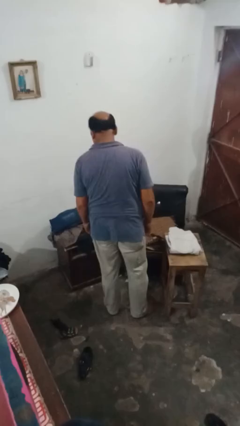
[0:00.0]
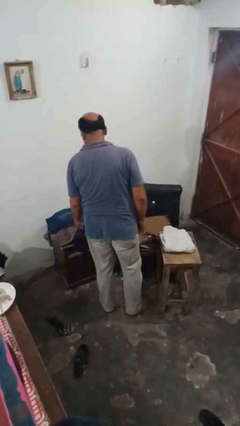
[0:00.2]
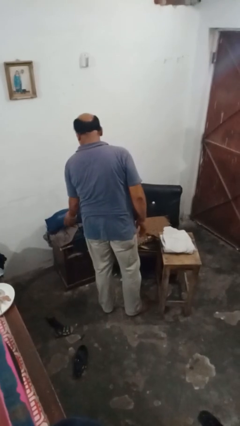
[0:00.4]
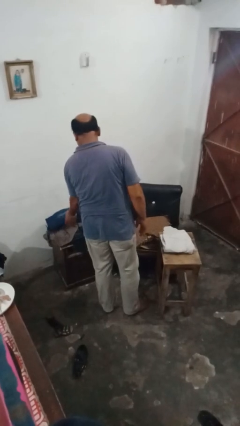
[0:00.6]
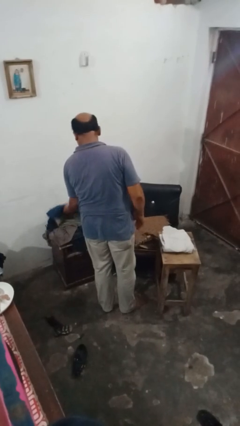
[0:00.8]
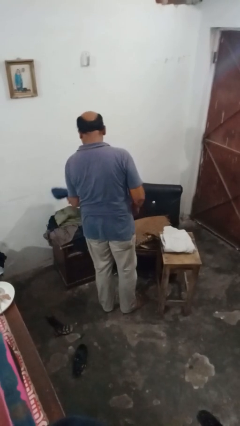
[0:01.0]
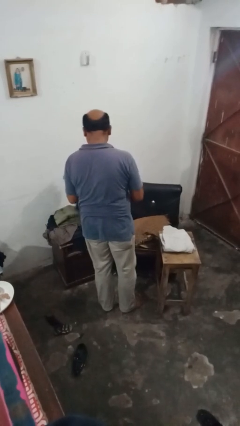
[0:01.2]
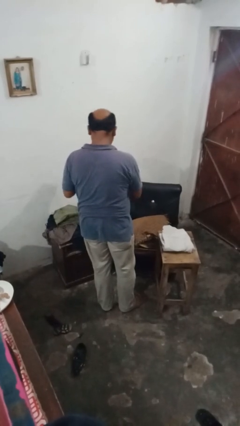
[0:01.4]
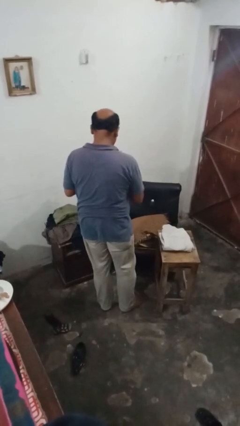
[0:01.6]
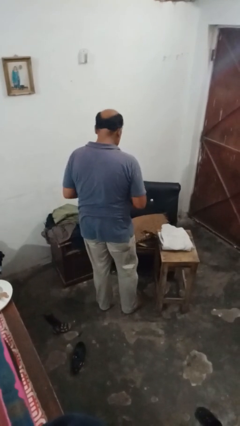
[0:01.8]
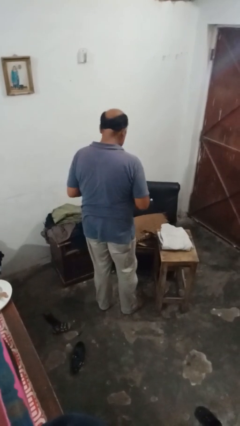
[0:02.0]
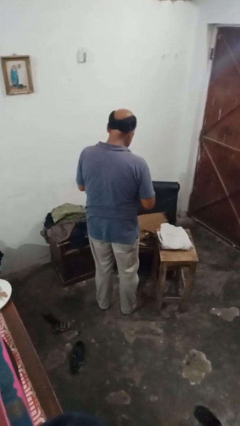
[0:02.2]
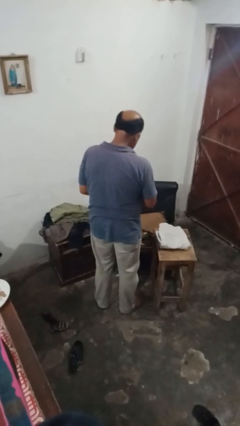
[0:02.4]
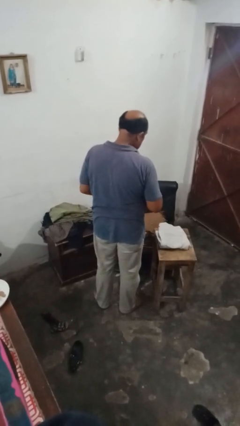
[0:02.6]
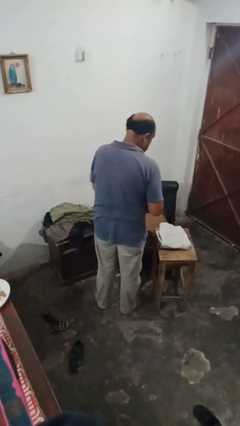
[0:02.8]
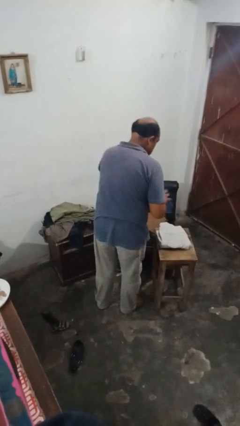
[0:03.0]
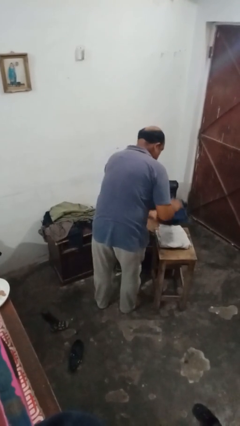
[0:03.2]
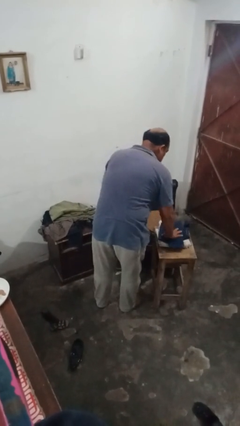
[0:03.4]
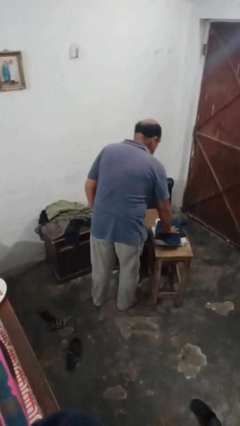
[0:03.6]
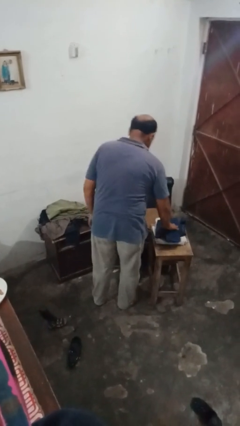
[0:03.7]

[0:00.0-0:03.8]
person folds pants

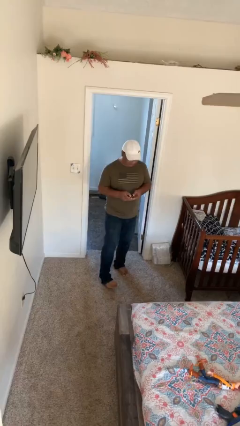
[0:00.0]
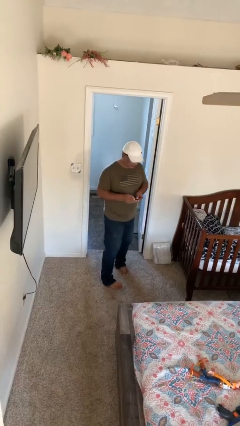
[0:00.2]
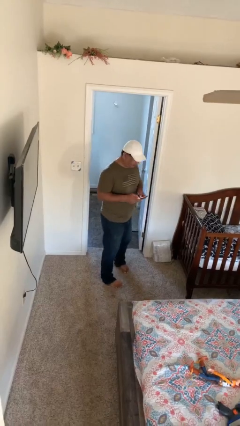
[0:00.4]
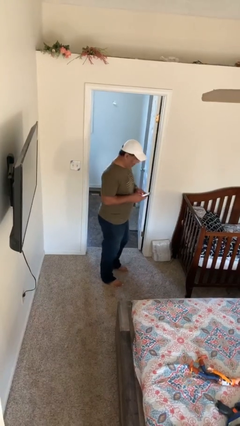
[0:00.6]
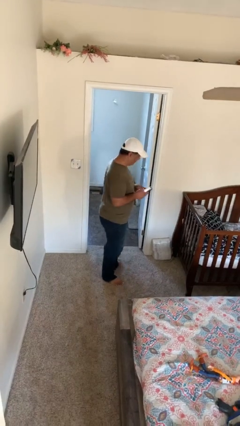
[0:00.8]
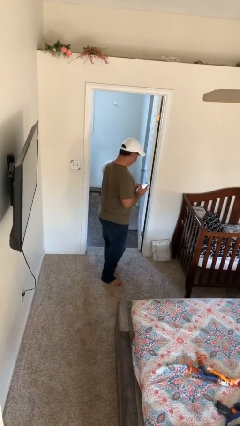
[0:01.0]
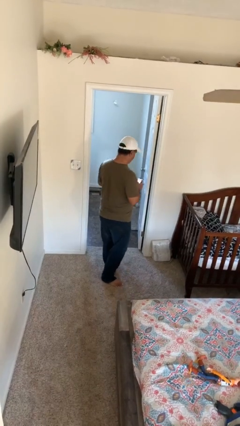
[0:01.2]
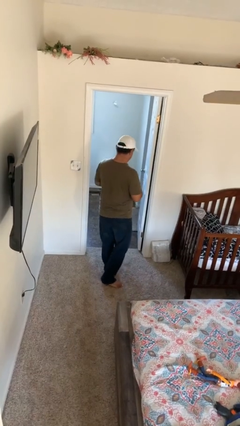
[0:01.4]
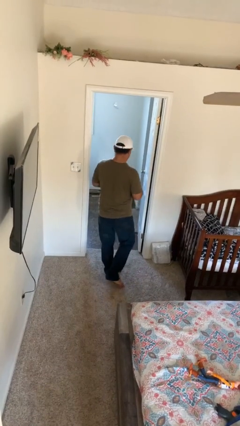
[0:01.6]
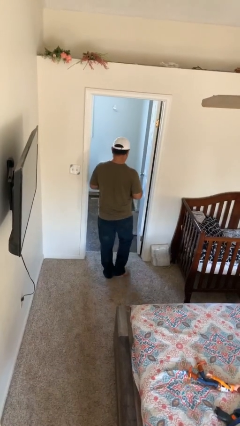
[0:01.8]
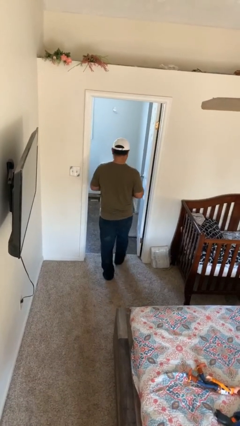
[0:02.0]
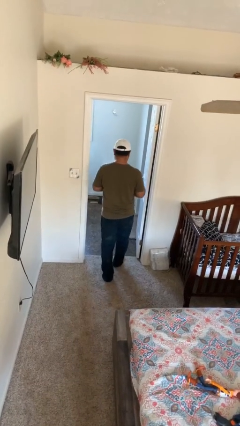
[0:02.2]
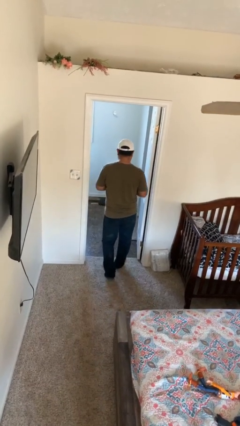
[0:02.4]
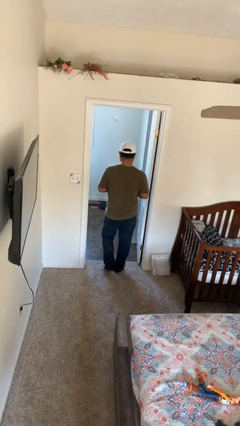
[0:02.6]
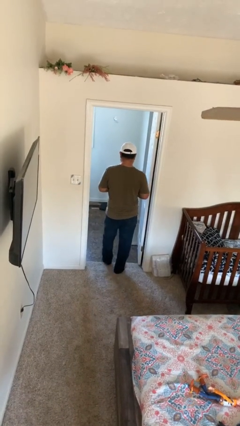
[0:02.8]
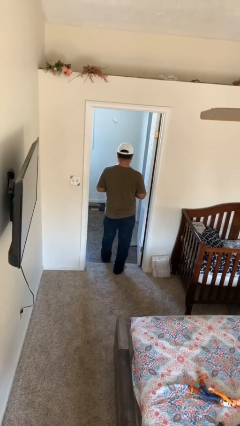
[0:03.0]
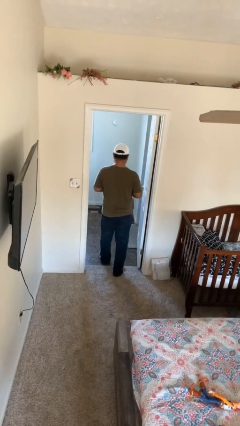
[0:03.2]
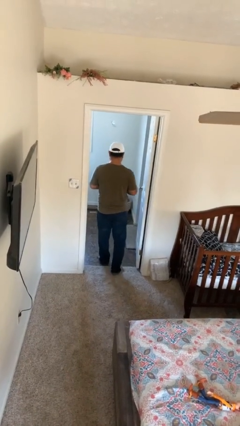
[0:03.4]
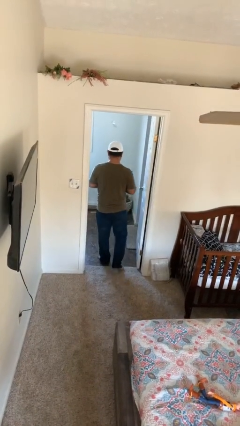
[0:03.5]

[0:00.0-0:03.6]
person exits scene through structure

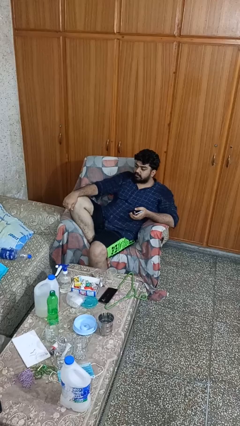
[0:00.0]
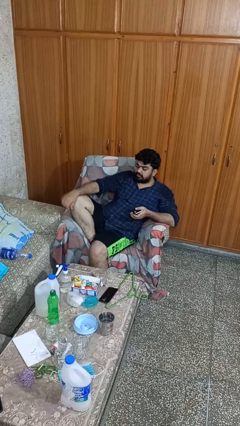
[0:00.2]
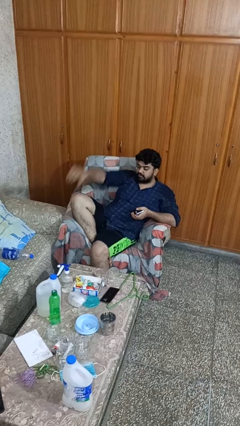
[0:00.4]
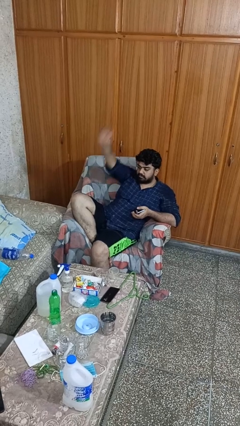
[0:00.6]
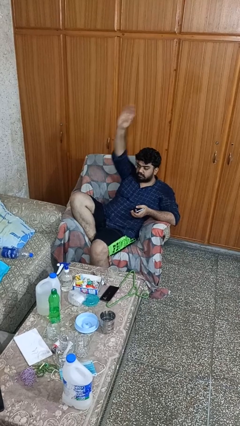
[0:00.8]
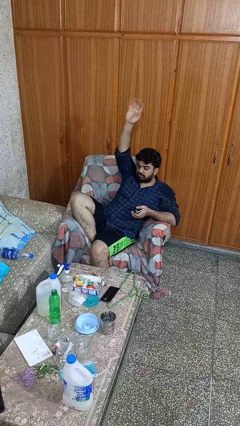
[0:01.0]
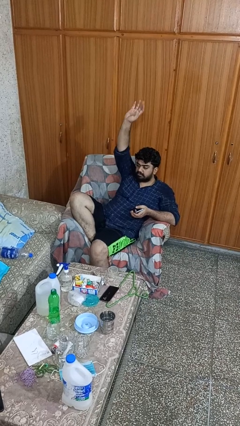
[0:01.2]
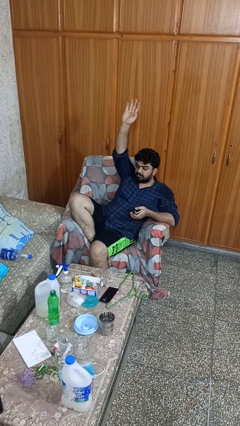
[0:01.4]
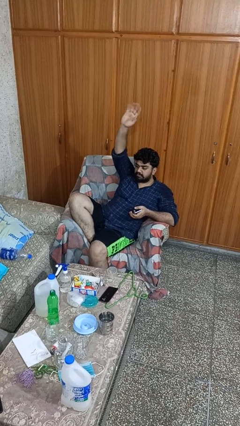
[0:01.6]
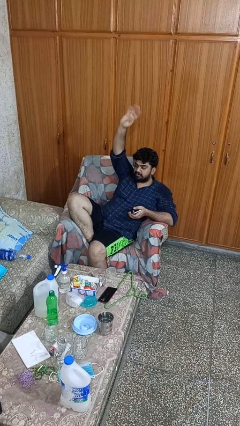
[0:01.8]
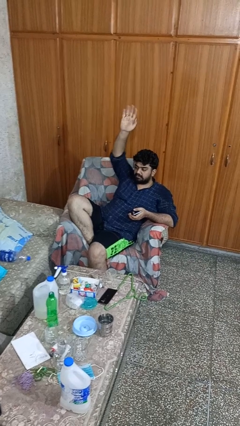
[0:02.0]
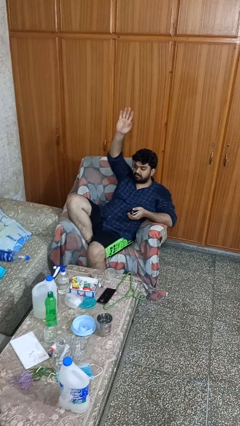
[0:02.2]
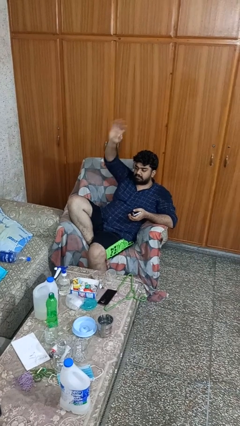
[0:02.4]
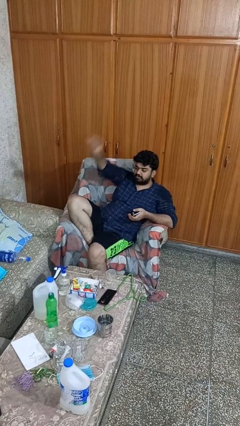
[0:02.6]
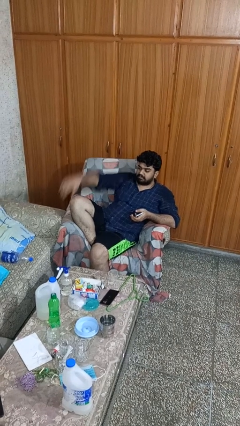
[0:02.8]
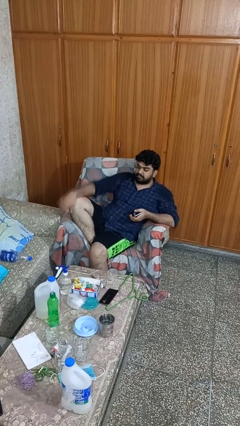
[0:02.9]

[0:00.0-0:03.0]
person waves at person

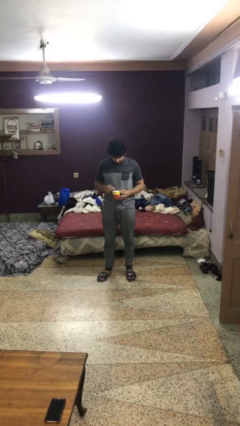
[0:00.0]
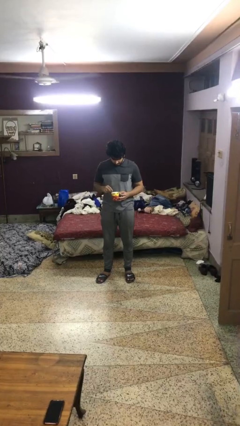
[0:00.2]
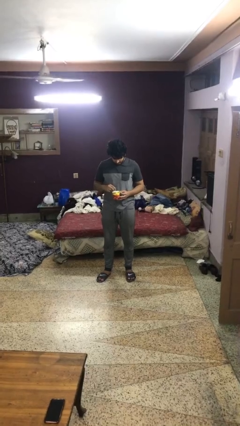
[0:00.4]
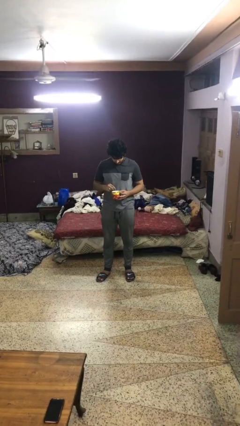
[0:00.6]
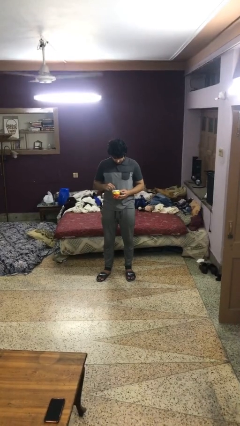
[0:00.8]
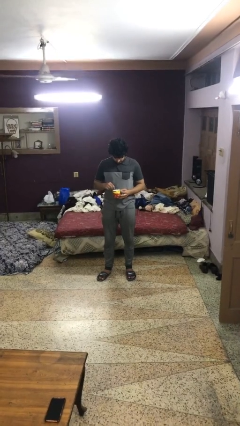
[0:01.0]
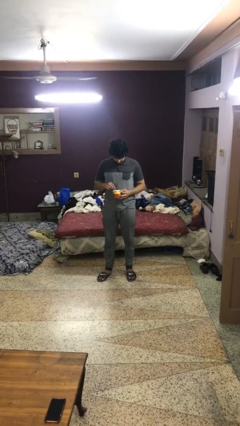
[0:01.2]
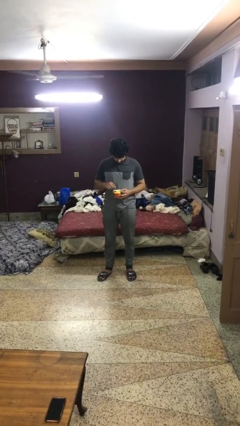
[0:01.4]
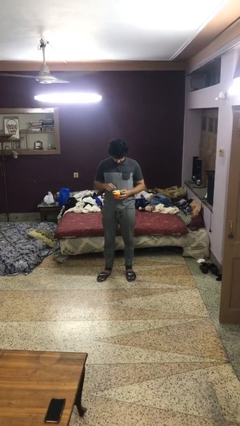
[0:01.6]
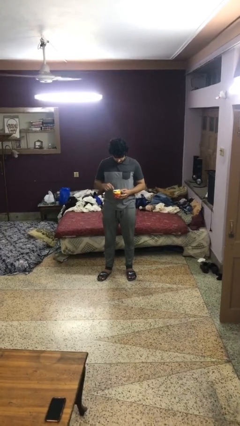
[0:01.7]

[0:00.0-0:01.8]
person stirs mug

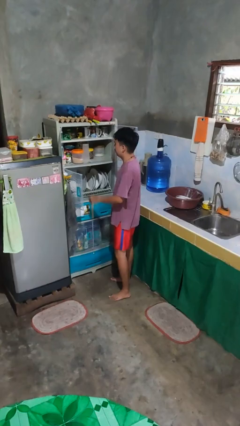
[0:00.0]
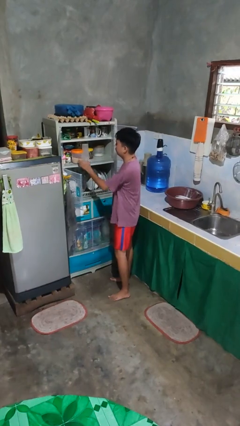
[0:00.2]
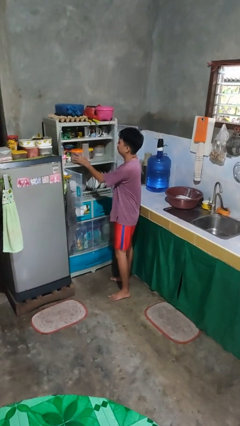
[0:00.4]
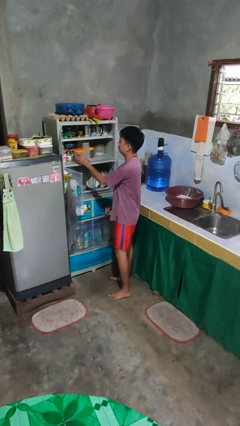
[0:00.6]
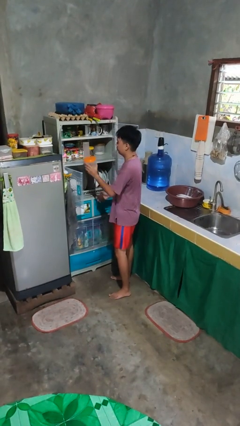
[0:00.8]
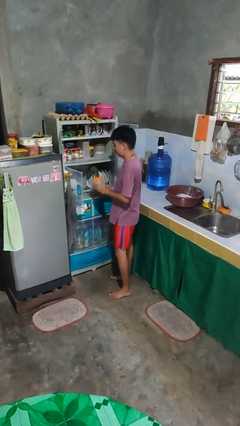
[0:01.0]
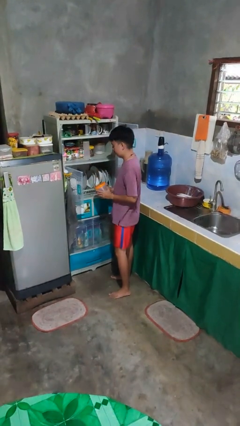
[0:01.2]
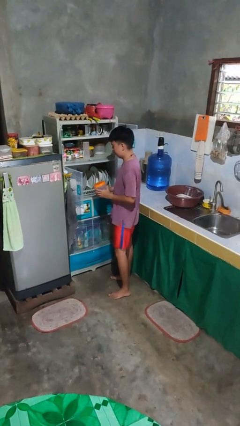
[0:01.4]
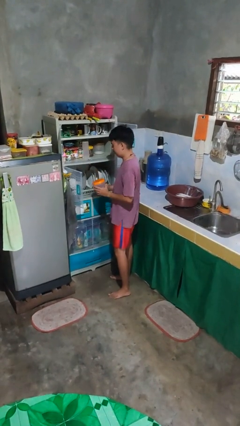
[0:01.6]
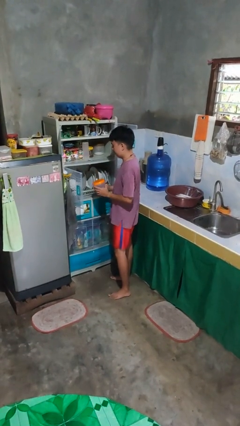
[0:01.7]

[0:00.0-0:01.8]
person takes object from cabinet

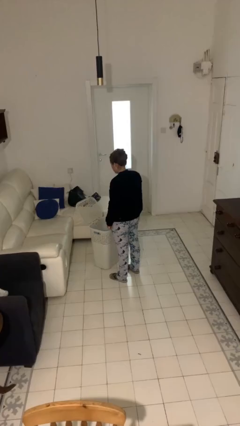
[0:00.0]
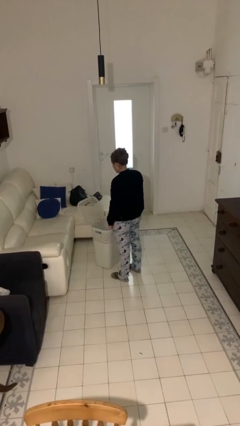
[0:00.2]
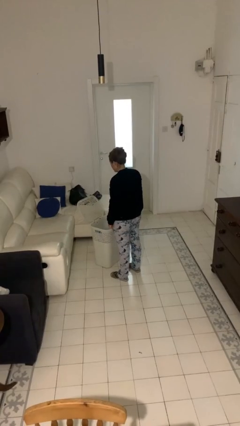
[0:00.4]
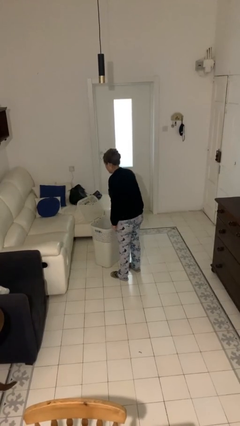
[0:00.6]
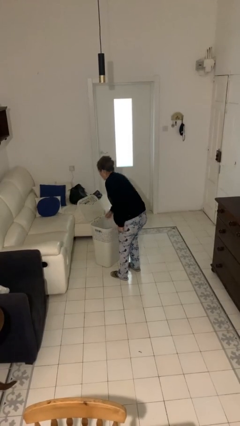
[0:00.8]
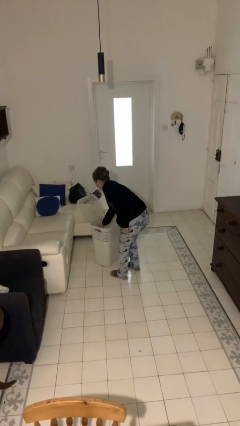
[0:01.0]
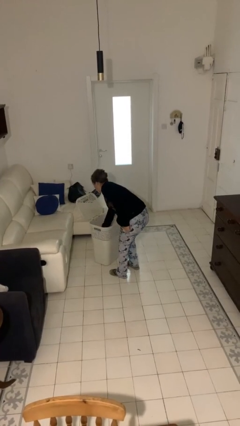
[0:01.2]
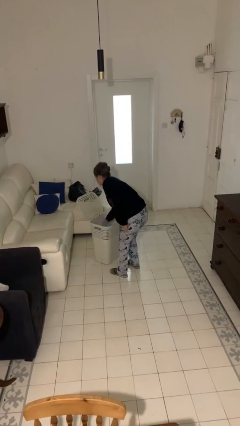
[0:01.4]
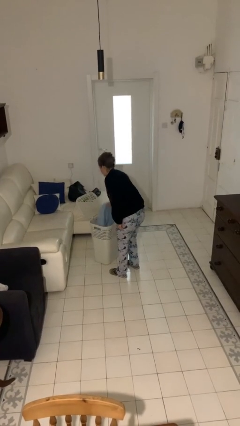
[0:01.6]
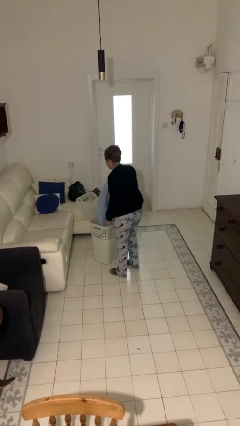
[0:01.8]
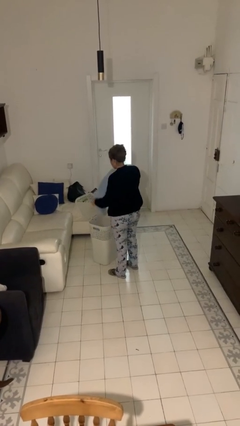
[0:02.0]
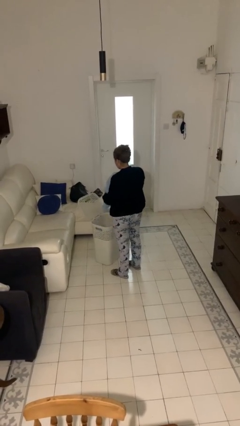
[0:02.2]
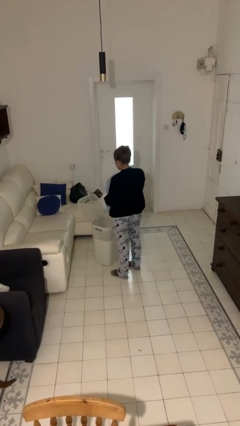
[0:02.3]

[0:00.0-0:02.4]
person takes object from basket

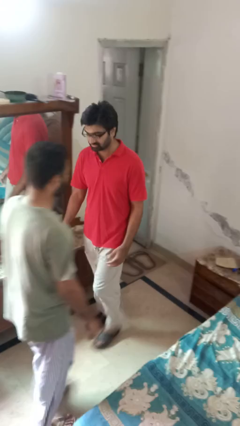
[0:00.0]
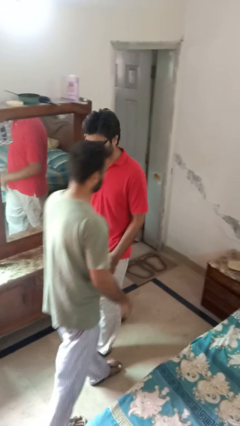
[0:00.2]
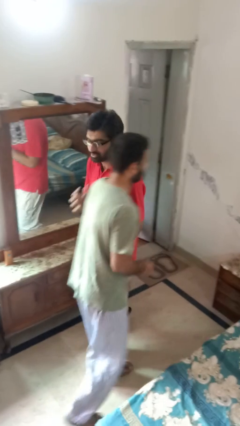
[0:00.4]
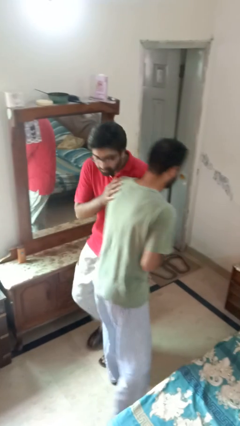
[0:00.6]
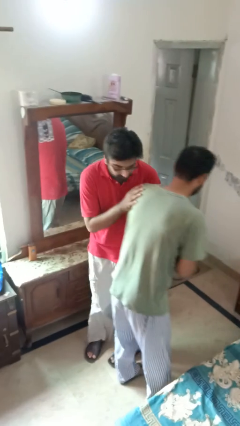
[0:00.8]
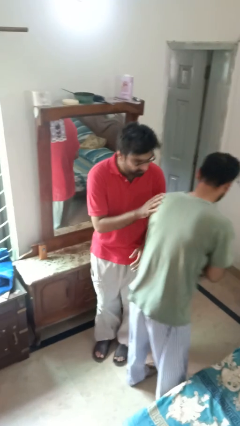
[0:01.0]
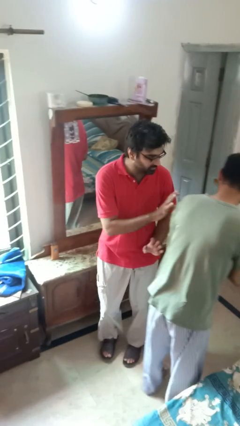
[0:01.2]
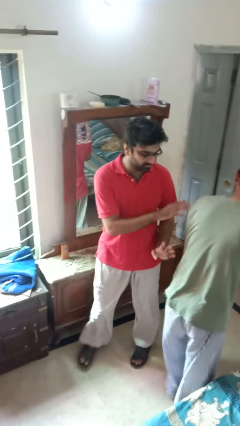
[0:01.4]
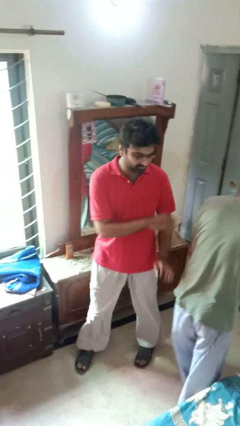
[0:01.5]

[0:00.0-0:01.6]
person bumps into person
